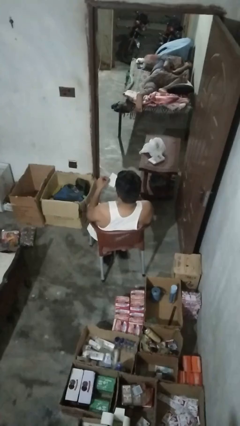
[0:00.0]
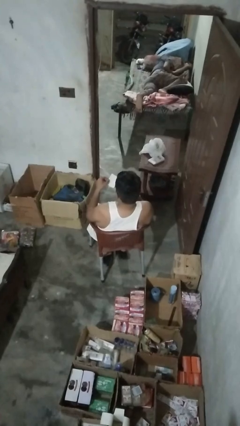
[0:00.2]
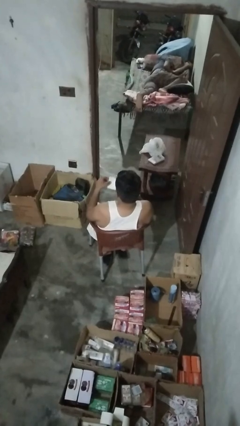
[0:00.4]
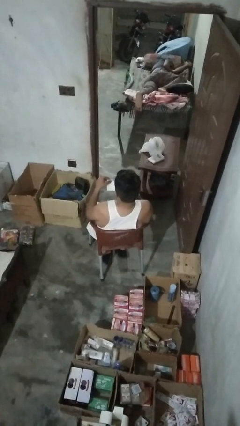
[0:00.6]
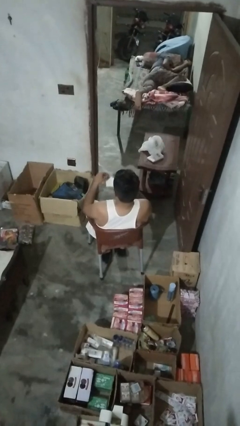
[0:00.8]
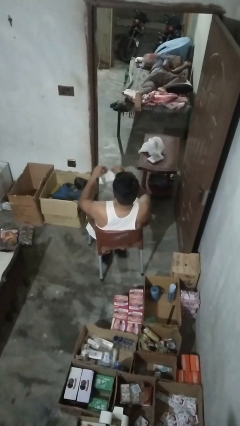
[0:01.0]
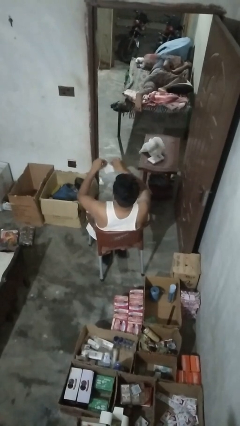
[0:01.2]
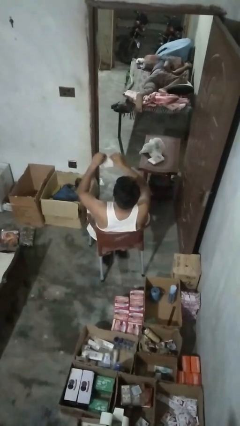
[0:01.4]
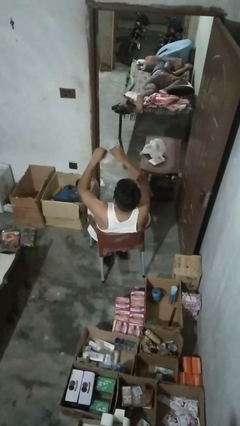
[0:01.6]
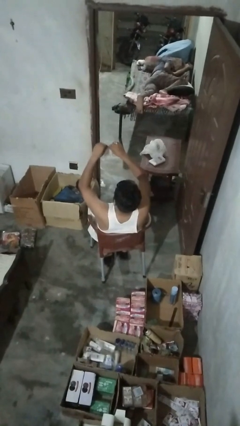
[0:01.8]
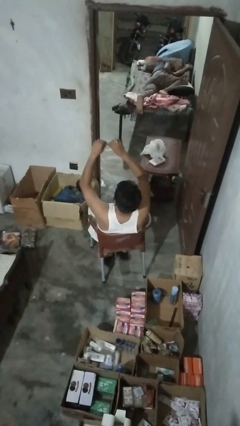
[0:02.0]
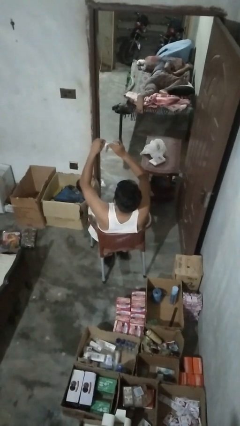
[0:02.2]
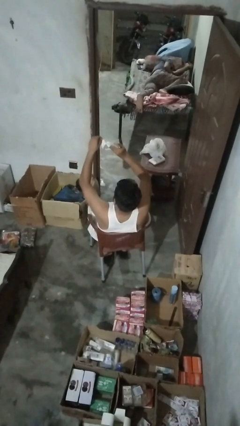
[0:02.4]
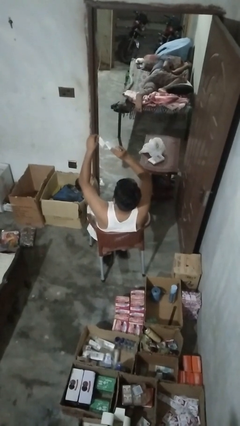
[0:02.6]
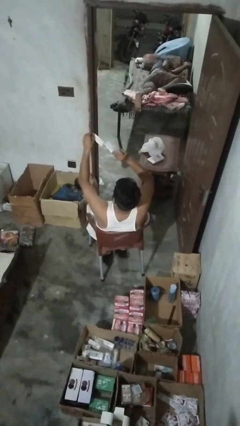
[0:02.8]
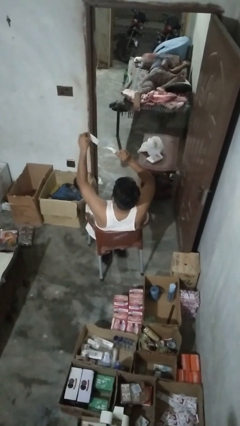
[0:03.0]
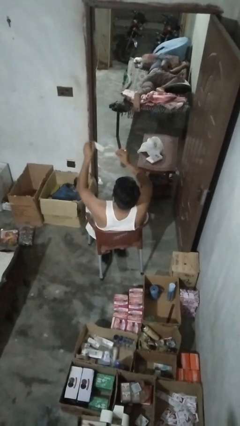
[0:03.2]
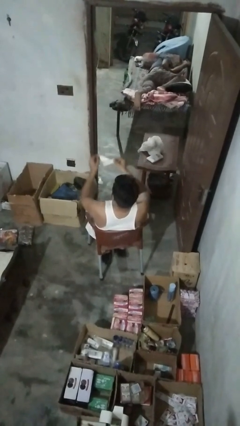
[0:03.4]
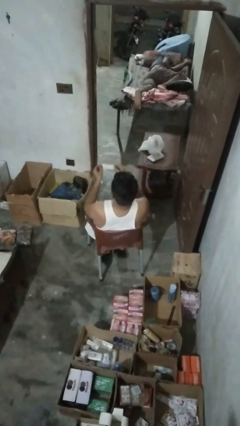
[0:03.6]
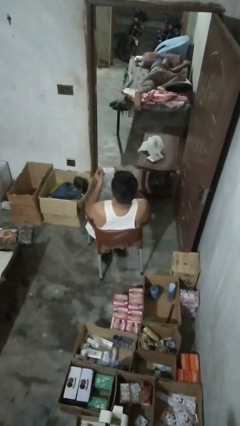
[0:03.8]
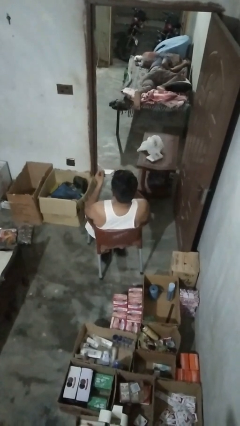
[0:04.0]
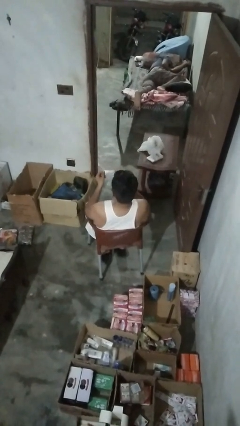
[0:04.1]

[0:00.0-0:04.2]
person tears paper

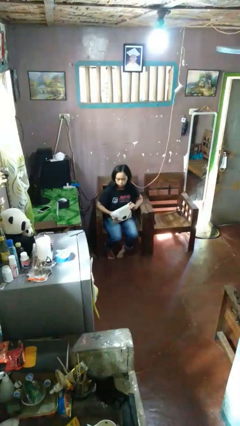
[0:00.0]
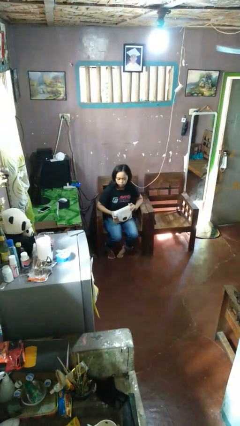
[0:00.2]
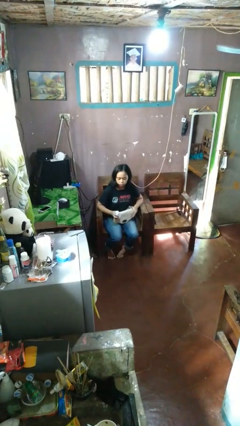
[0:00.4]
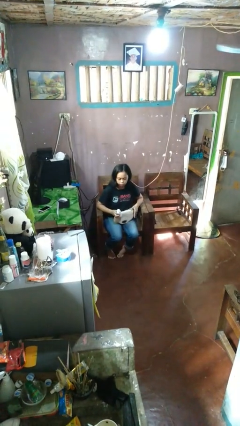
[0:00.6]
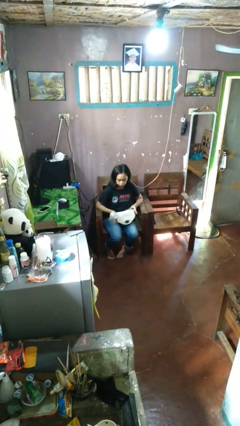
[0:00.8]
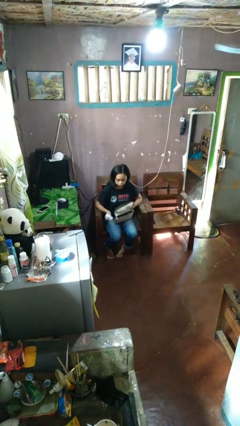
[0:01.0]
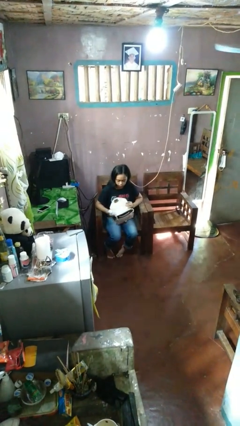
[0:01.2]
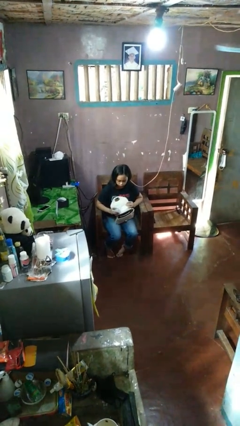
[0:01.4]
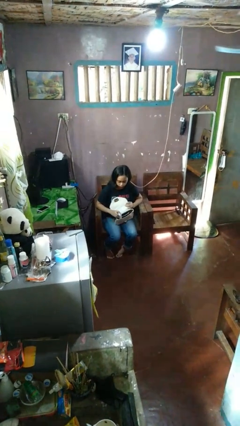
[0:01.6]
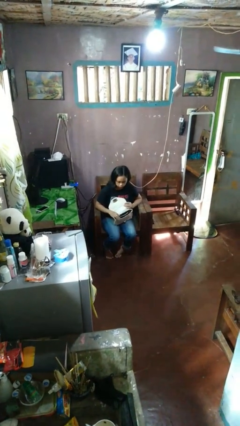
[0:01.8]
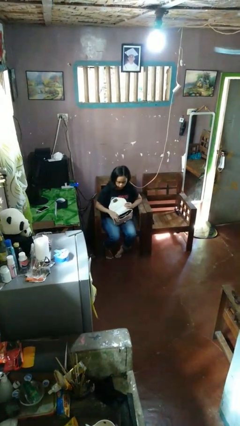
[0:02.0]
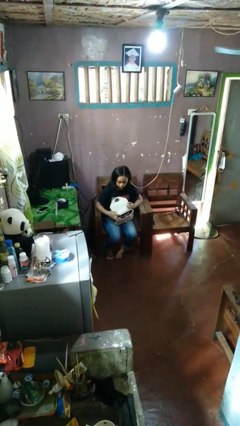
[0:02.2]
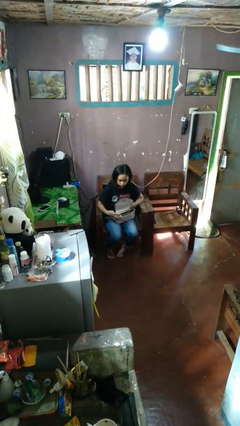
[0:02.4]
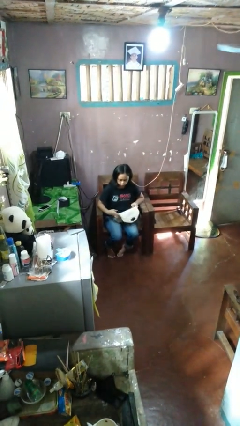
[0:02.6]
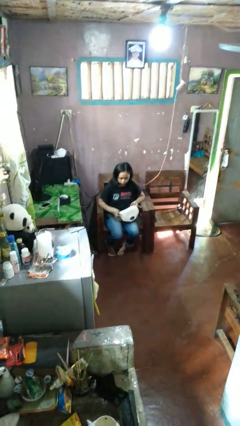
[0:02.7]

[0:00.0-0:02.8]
person puts object into purse

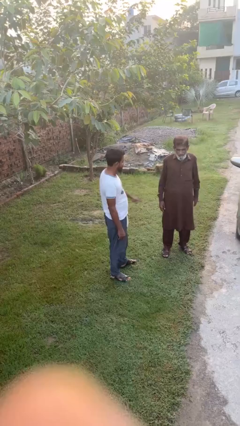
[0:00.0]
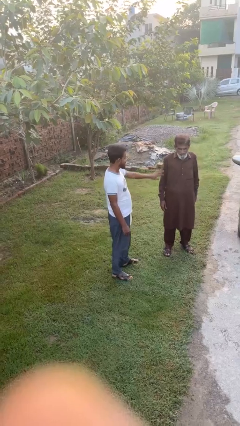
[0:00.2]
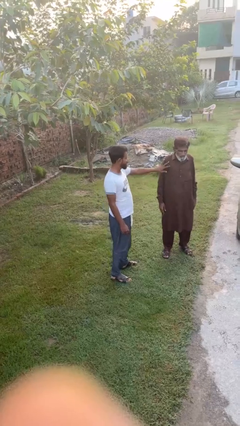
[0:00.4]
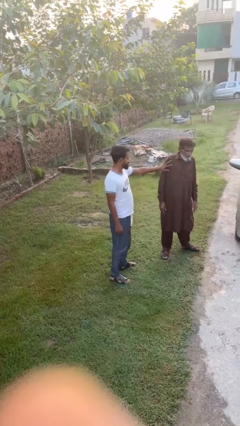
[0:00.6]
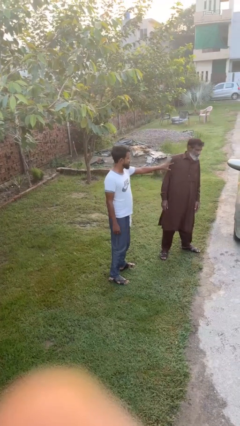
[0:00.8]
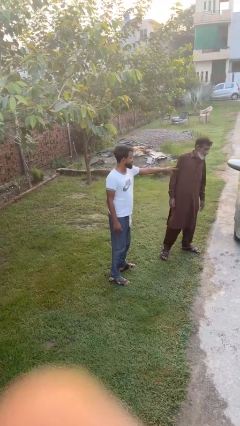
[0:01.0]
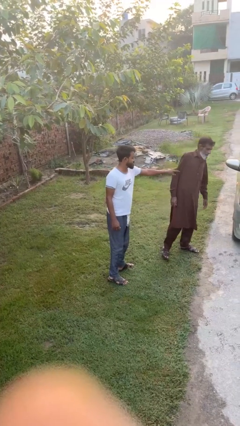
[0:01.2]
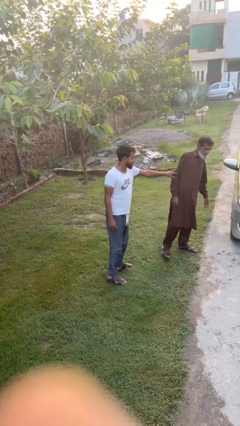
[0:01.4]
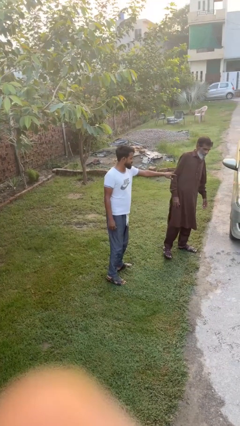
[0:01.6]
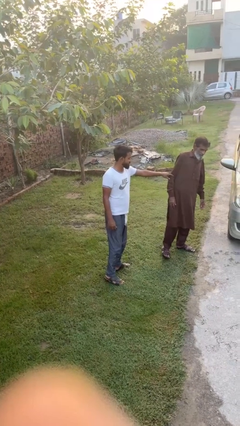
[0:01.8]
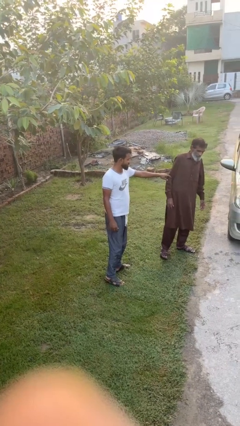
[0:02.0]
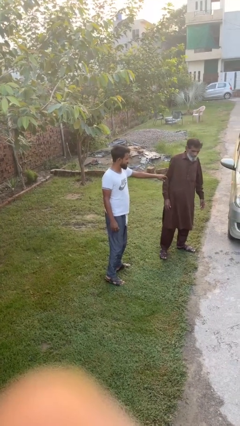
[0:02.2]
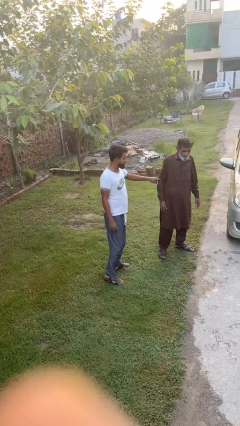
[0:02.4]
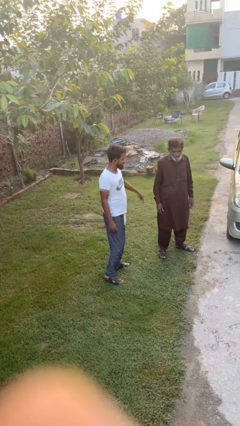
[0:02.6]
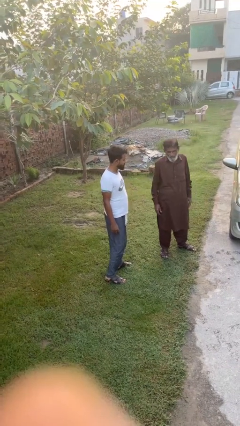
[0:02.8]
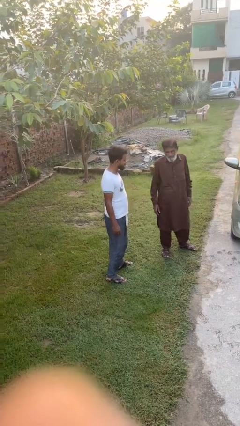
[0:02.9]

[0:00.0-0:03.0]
person shoves person

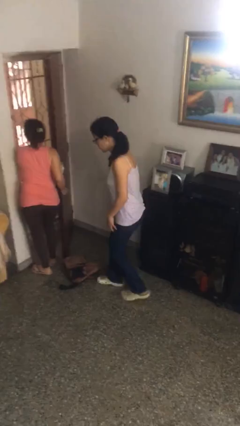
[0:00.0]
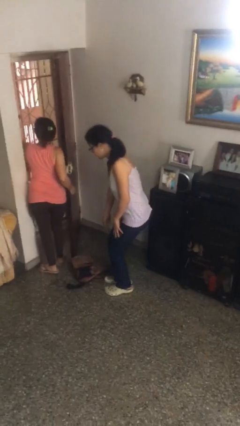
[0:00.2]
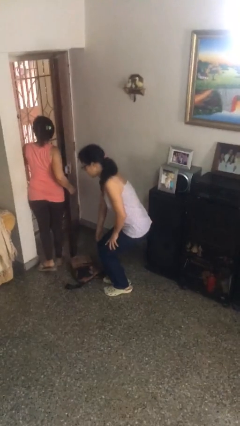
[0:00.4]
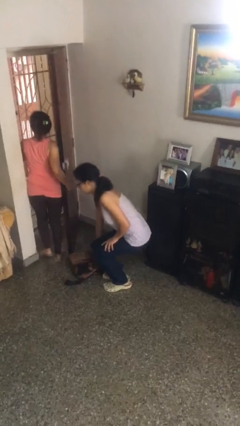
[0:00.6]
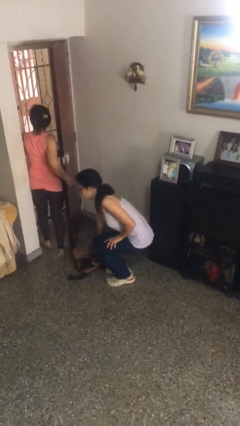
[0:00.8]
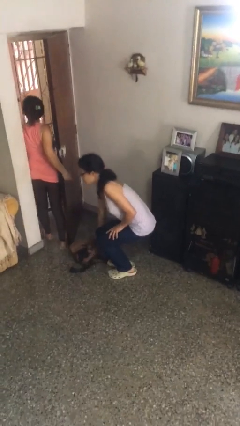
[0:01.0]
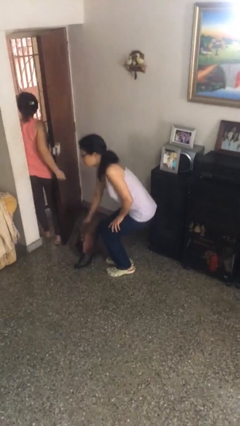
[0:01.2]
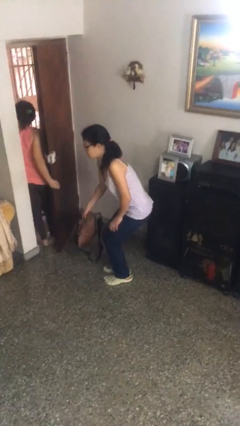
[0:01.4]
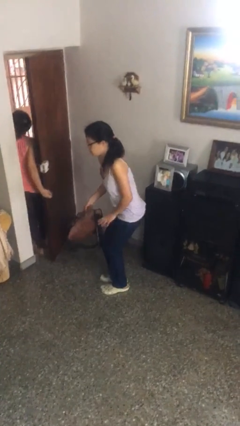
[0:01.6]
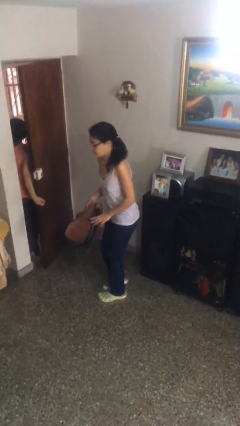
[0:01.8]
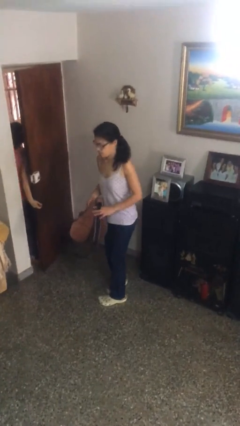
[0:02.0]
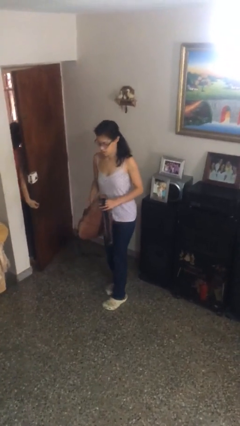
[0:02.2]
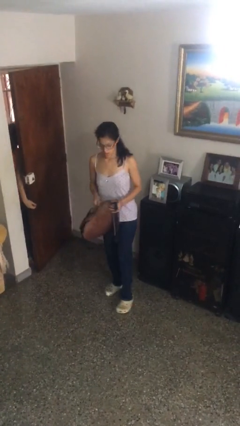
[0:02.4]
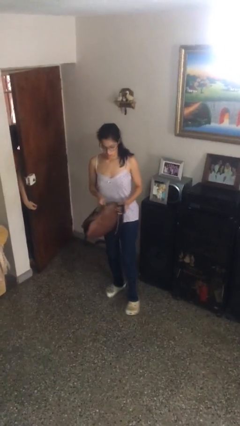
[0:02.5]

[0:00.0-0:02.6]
person steals object from person

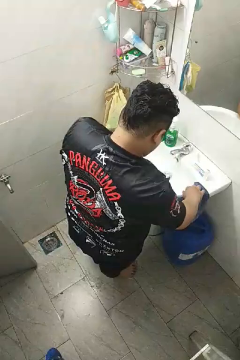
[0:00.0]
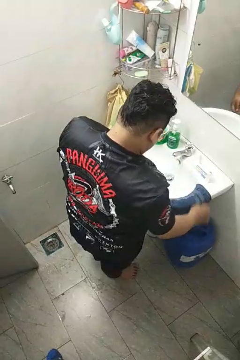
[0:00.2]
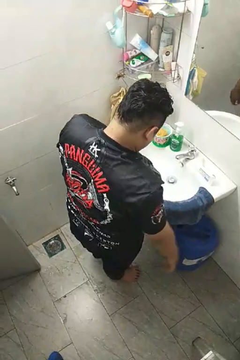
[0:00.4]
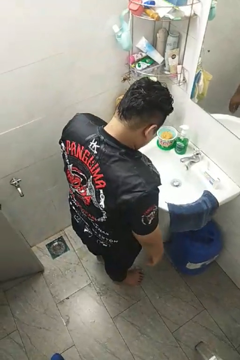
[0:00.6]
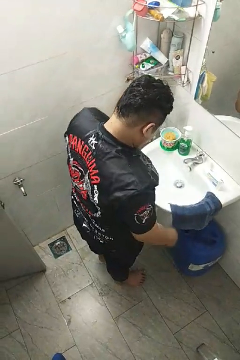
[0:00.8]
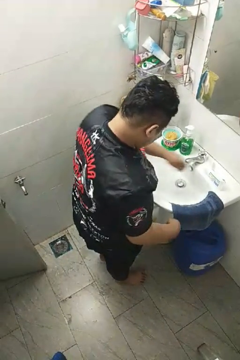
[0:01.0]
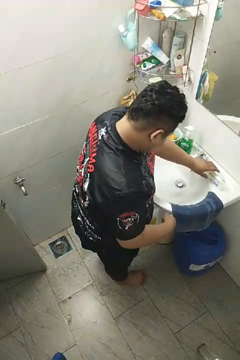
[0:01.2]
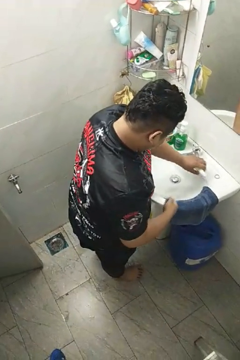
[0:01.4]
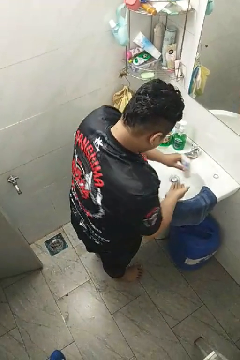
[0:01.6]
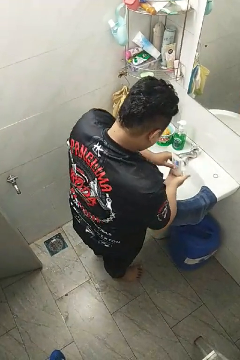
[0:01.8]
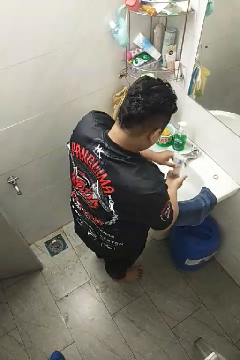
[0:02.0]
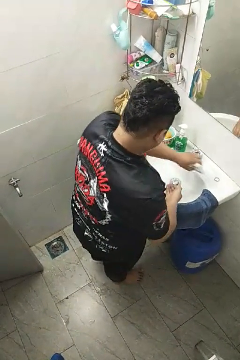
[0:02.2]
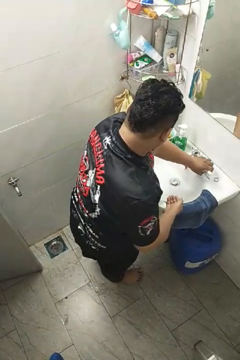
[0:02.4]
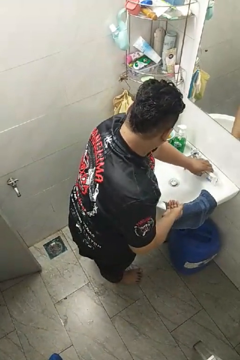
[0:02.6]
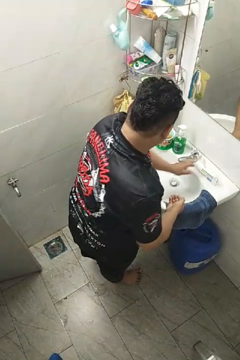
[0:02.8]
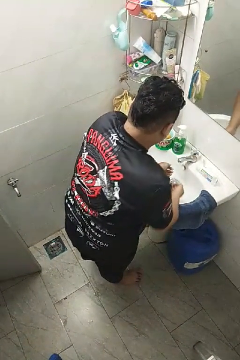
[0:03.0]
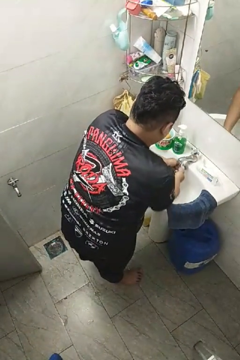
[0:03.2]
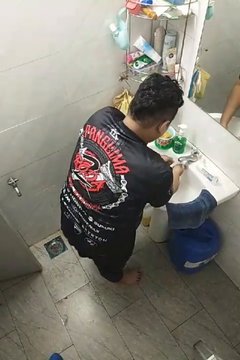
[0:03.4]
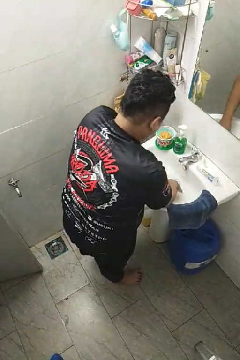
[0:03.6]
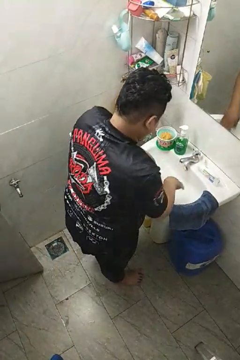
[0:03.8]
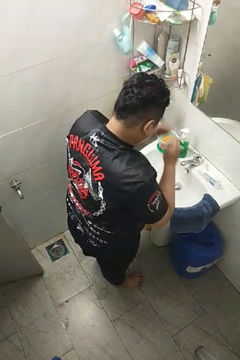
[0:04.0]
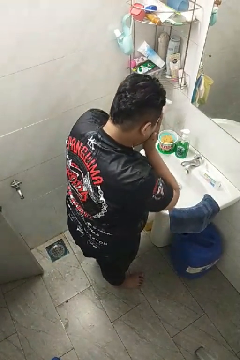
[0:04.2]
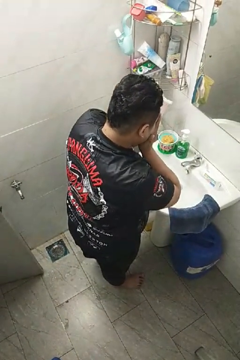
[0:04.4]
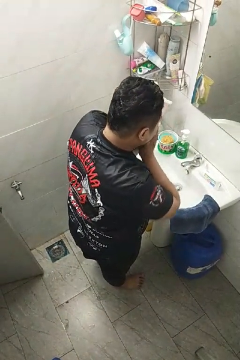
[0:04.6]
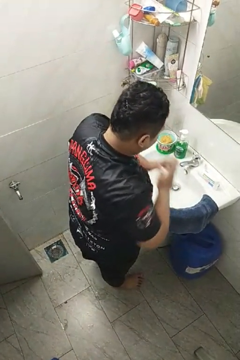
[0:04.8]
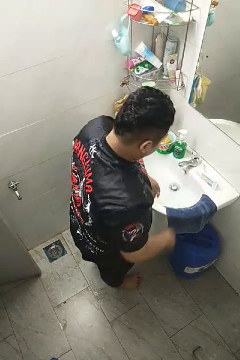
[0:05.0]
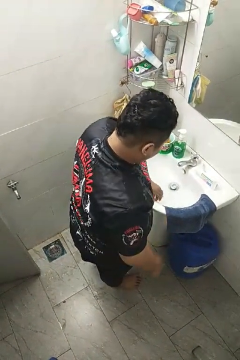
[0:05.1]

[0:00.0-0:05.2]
person washes face

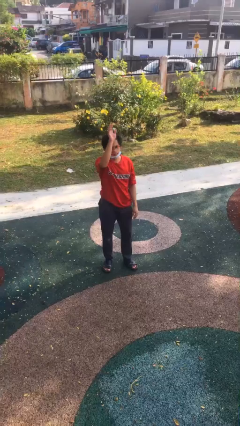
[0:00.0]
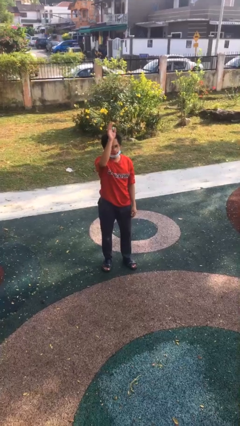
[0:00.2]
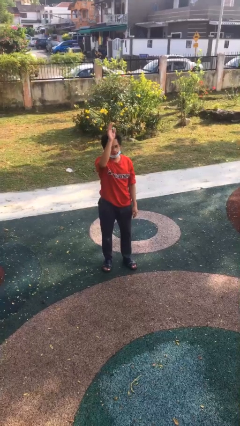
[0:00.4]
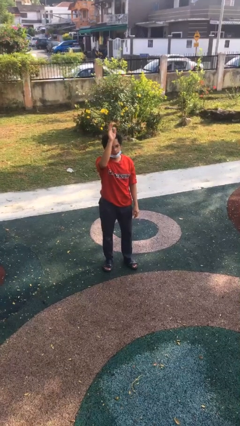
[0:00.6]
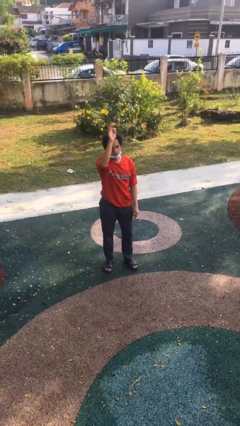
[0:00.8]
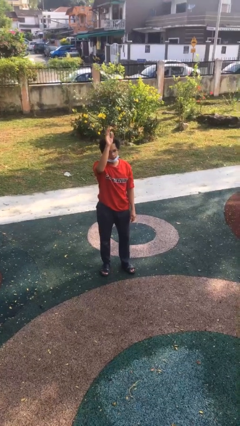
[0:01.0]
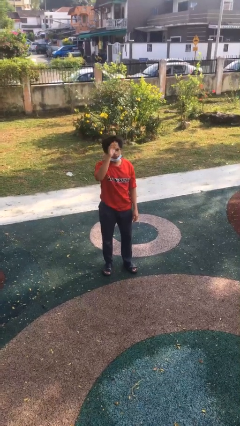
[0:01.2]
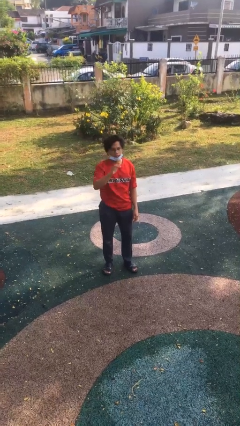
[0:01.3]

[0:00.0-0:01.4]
person gestures raise hand
